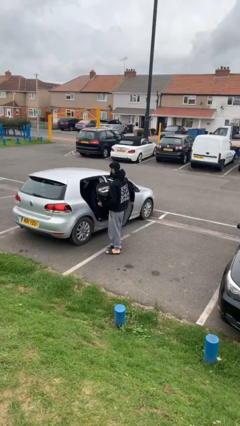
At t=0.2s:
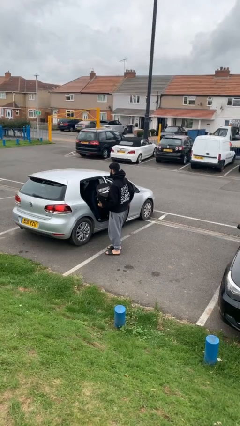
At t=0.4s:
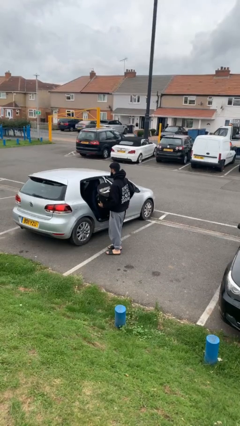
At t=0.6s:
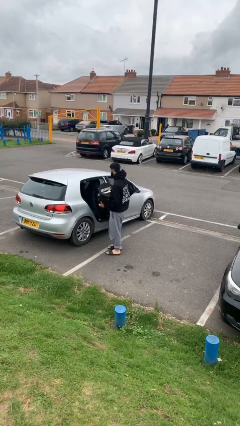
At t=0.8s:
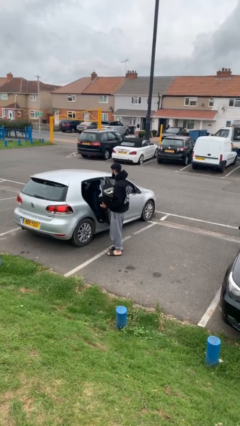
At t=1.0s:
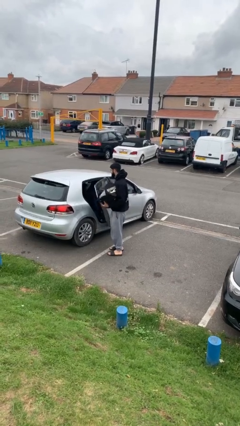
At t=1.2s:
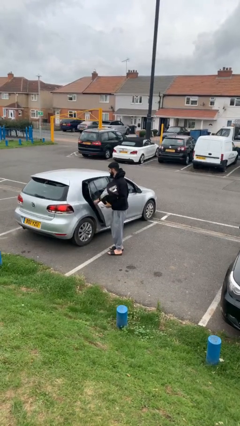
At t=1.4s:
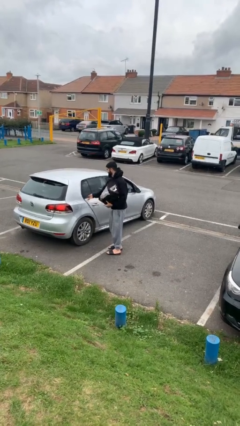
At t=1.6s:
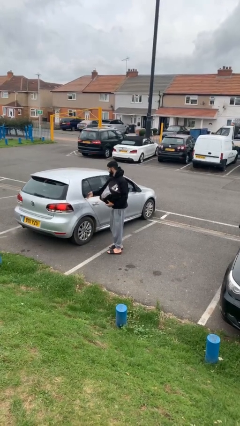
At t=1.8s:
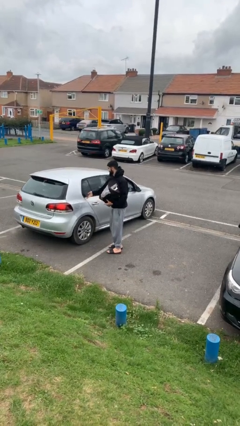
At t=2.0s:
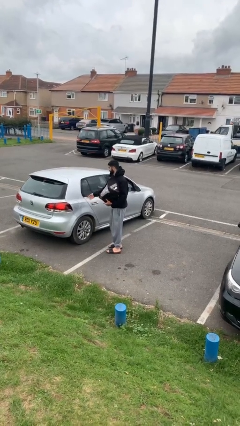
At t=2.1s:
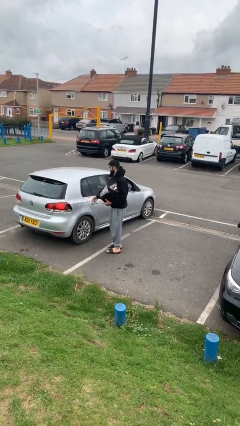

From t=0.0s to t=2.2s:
person closes car door

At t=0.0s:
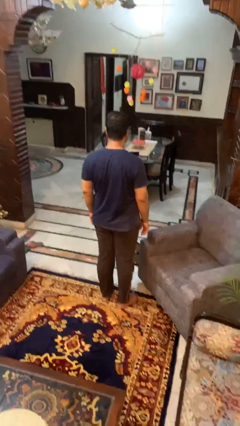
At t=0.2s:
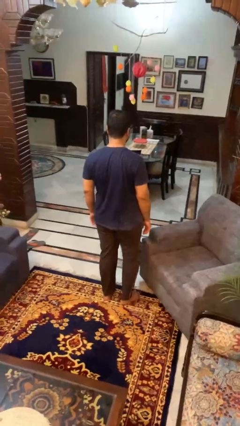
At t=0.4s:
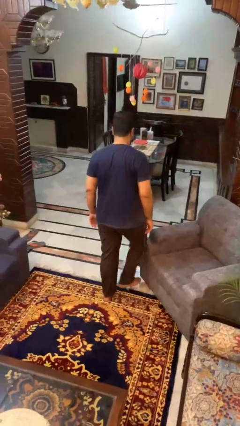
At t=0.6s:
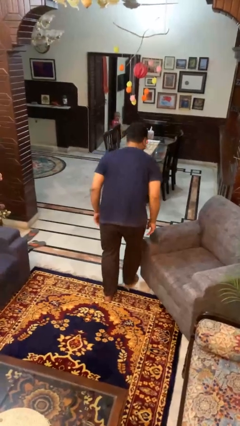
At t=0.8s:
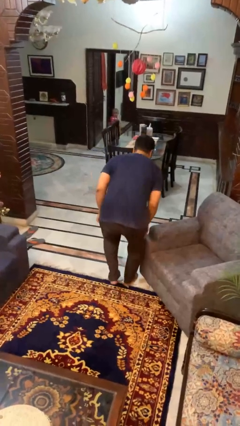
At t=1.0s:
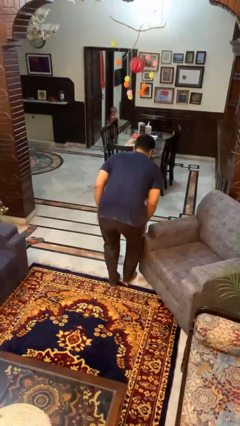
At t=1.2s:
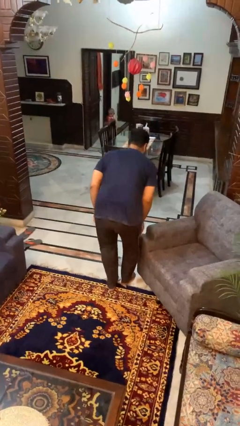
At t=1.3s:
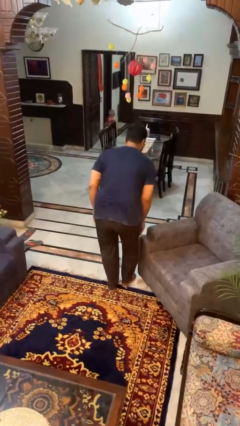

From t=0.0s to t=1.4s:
person stubs toe

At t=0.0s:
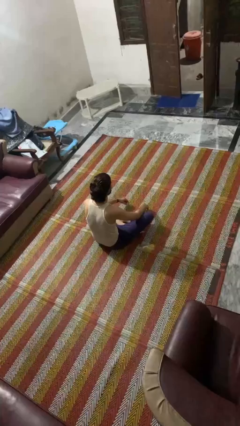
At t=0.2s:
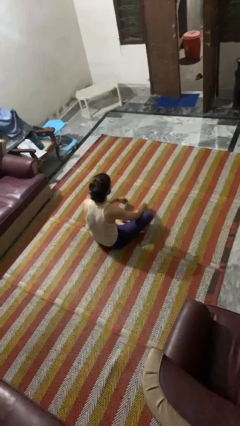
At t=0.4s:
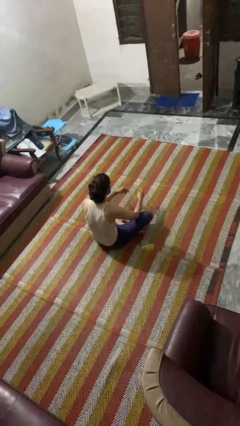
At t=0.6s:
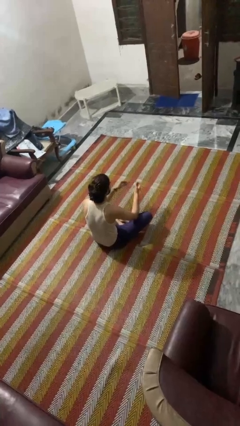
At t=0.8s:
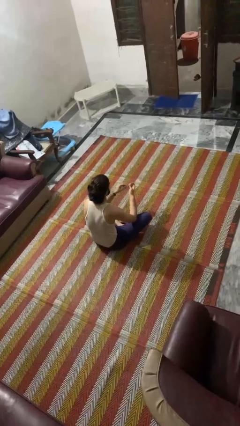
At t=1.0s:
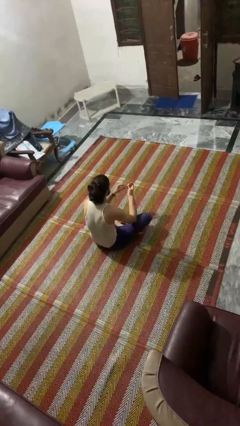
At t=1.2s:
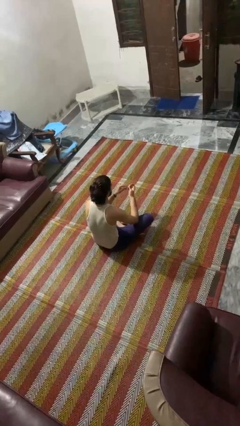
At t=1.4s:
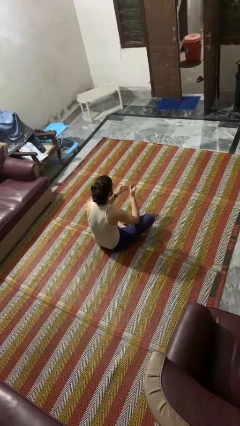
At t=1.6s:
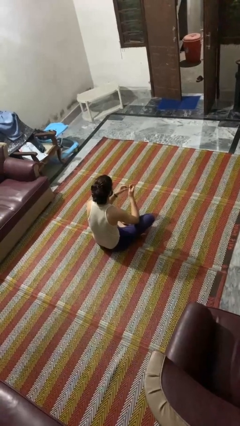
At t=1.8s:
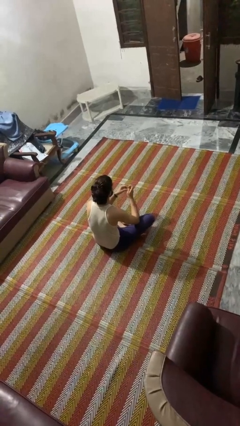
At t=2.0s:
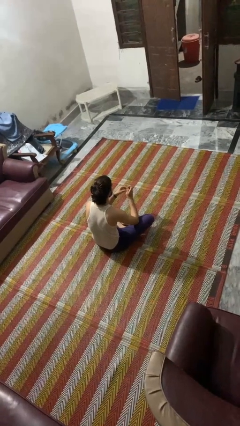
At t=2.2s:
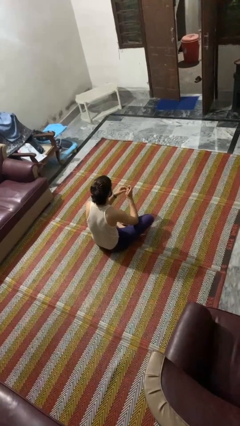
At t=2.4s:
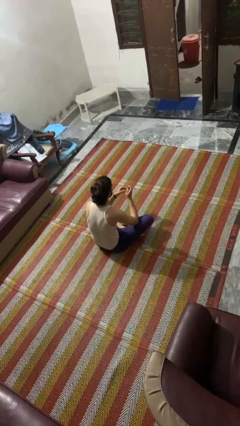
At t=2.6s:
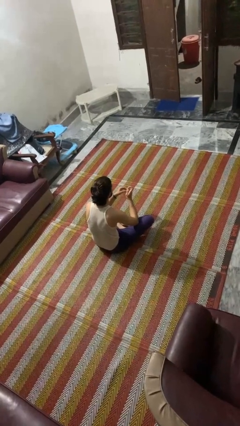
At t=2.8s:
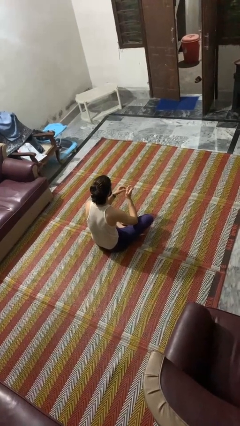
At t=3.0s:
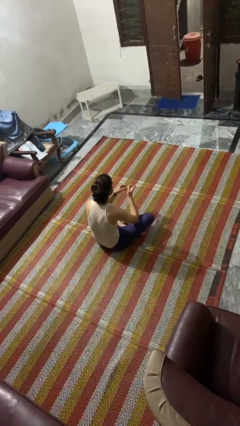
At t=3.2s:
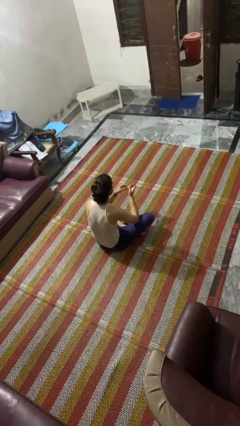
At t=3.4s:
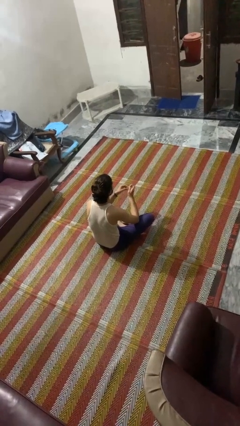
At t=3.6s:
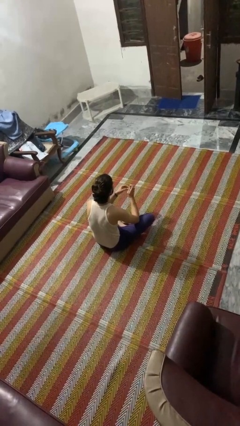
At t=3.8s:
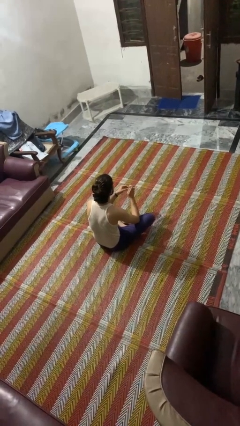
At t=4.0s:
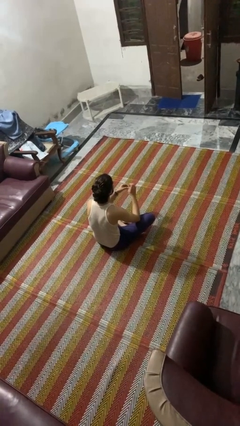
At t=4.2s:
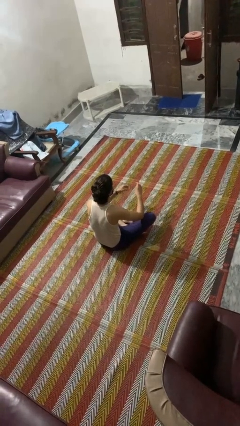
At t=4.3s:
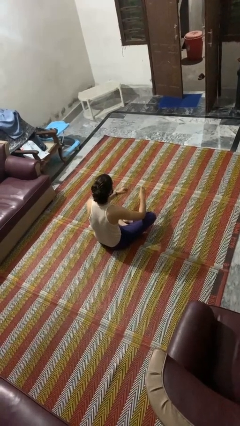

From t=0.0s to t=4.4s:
person files fingernails

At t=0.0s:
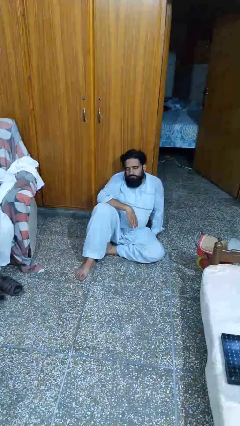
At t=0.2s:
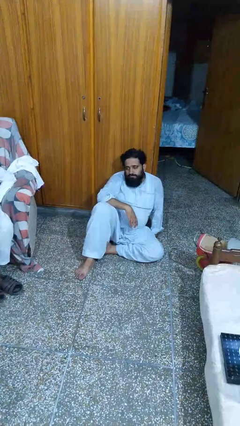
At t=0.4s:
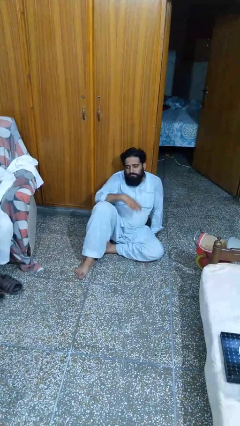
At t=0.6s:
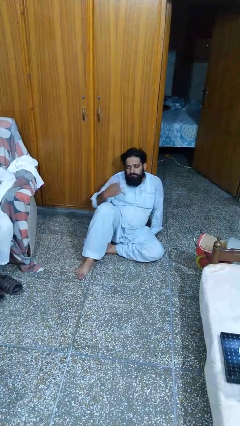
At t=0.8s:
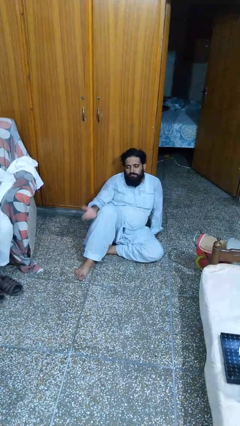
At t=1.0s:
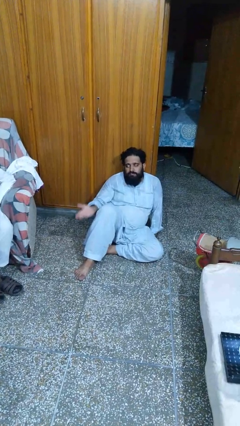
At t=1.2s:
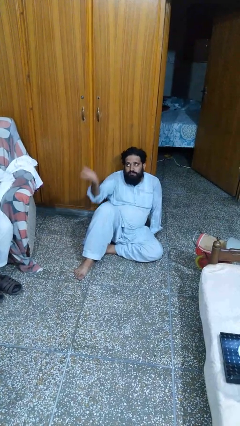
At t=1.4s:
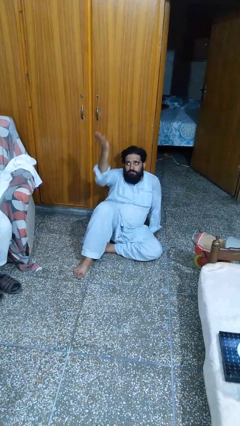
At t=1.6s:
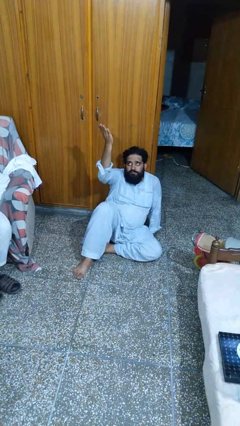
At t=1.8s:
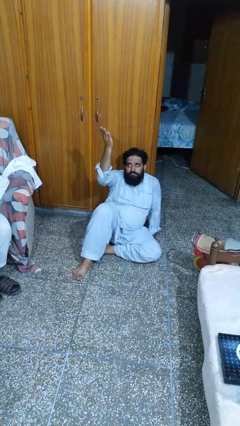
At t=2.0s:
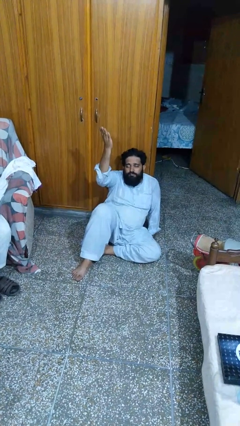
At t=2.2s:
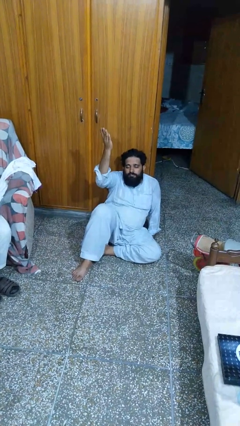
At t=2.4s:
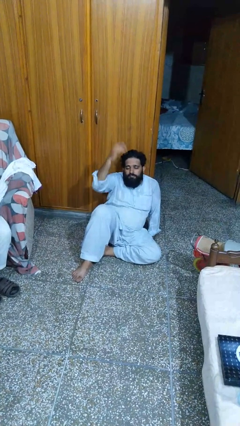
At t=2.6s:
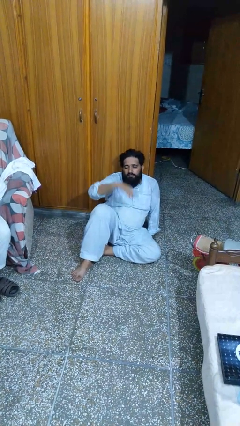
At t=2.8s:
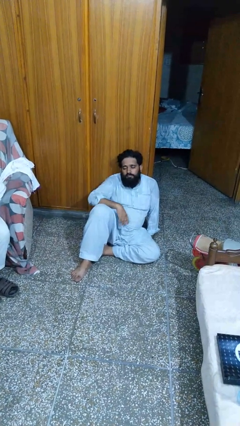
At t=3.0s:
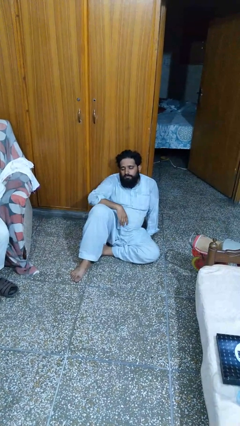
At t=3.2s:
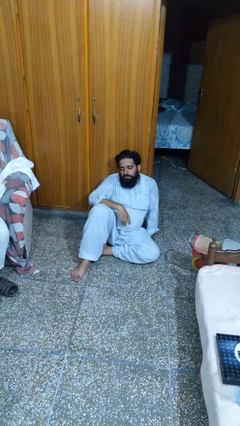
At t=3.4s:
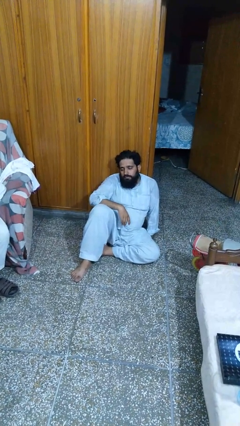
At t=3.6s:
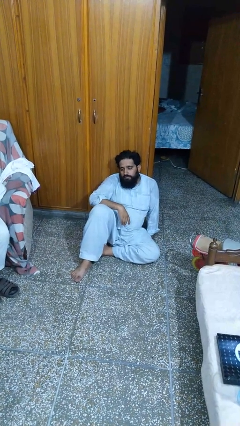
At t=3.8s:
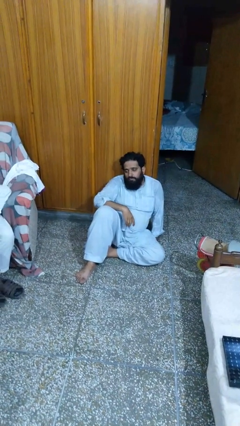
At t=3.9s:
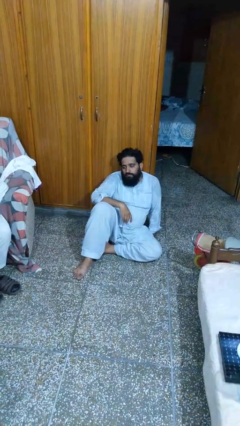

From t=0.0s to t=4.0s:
person gestures swipe up

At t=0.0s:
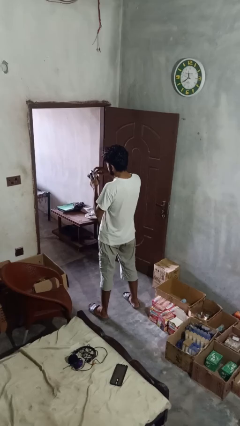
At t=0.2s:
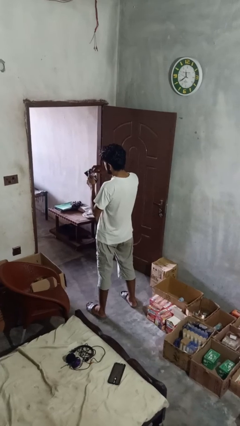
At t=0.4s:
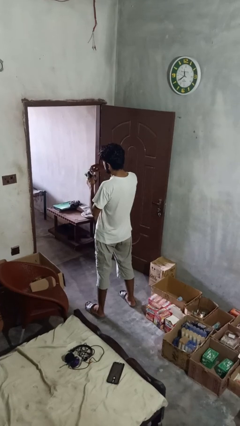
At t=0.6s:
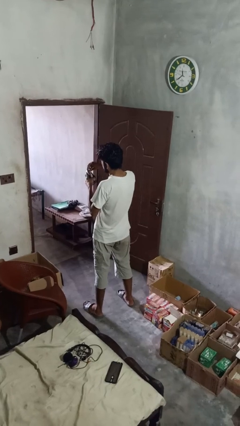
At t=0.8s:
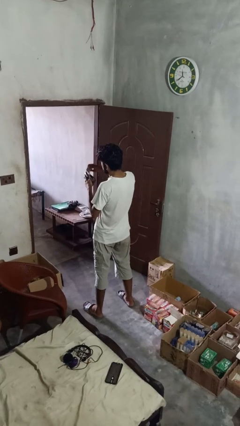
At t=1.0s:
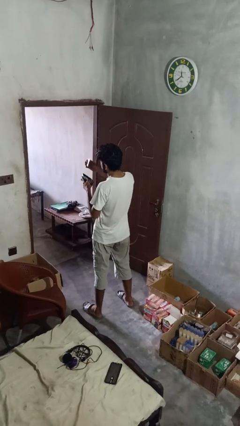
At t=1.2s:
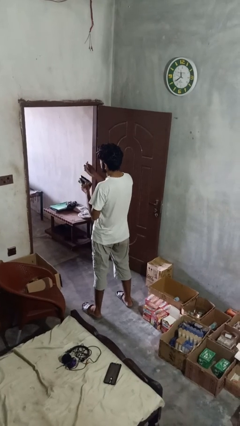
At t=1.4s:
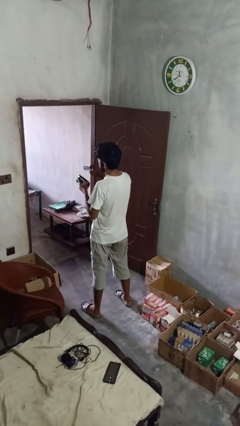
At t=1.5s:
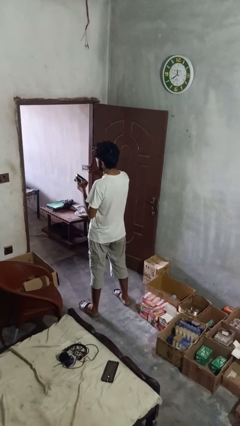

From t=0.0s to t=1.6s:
person takes object from purse

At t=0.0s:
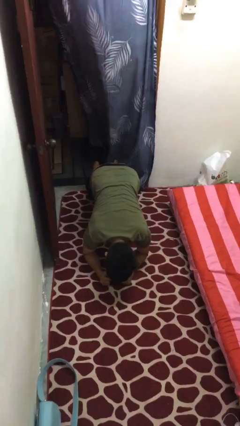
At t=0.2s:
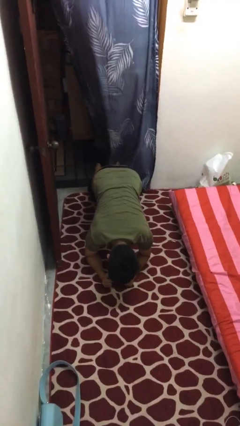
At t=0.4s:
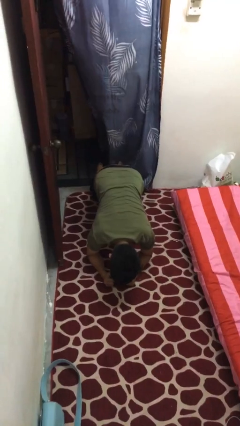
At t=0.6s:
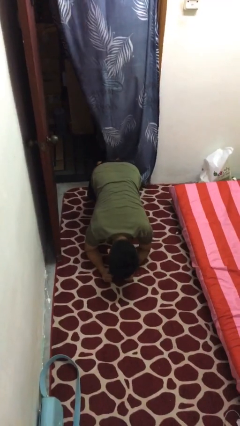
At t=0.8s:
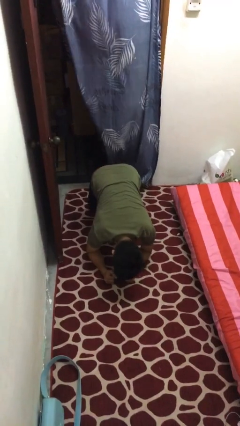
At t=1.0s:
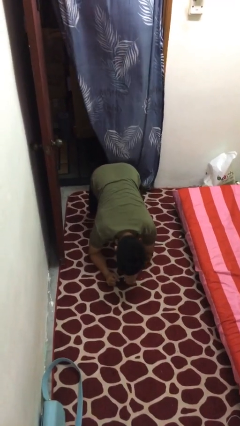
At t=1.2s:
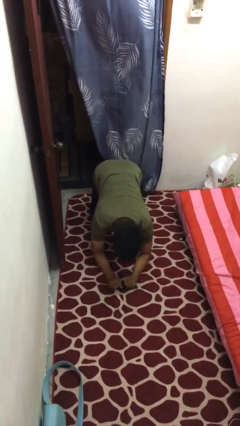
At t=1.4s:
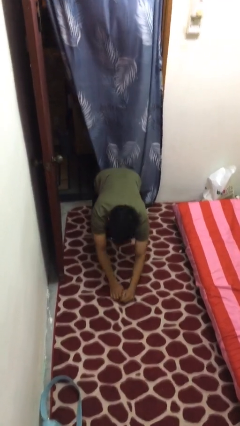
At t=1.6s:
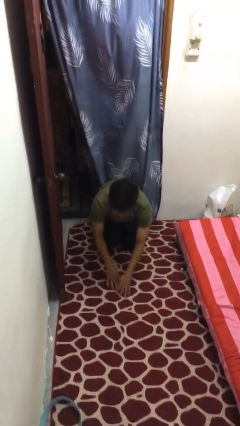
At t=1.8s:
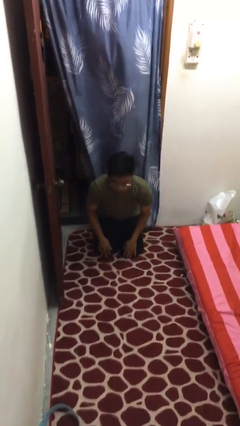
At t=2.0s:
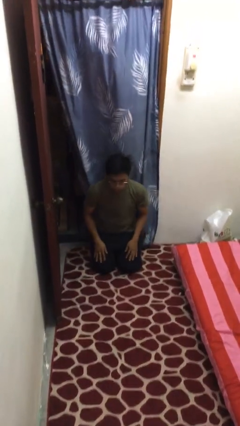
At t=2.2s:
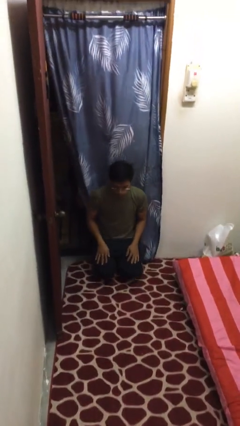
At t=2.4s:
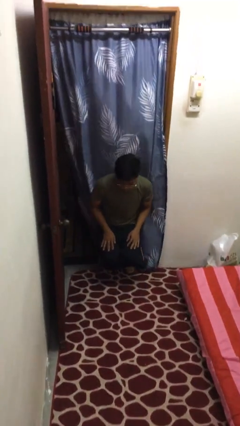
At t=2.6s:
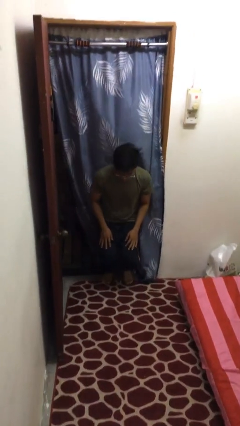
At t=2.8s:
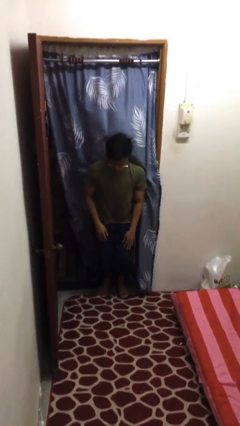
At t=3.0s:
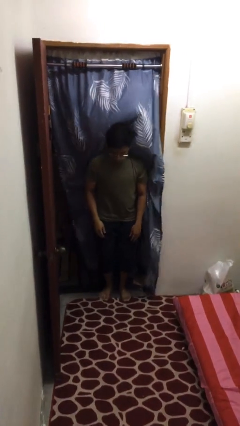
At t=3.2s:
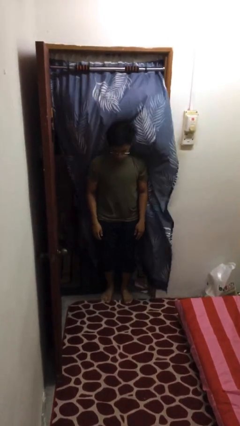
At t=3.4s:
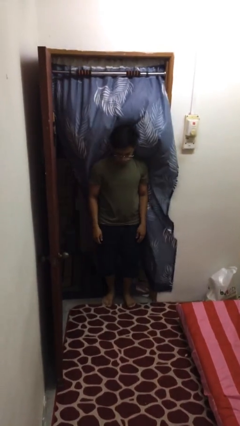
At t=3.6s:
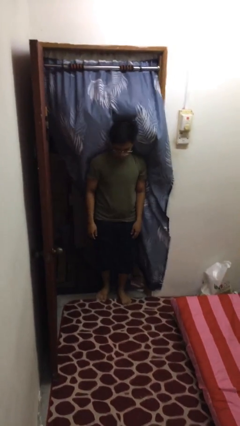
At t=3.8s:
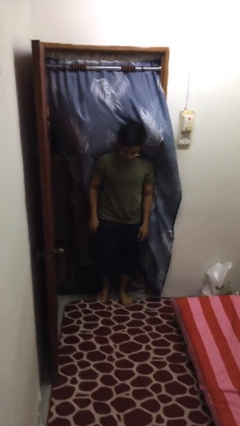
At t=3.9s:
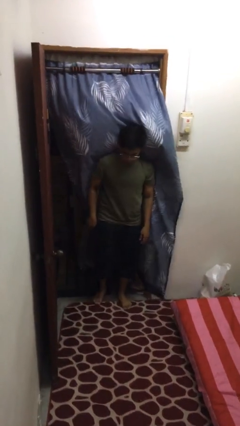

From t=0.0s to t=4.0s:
person stands up from floor
